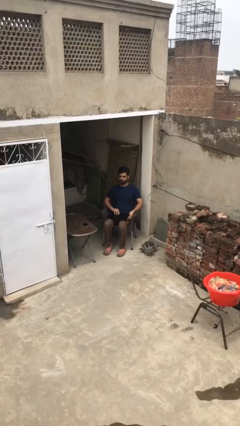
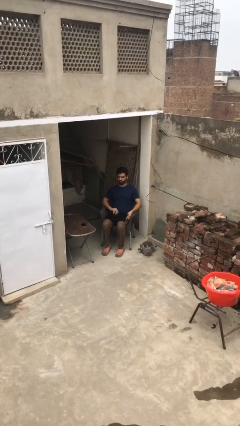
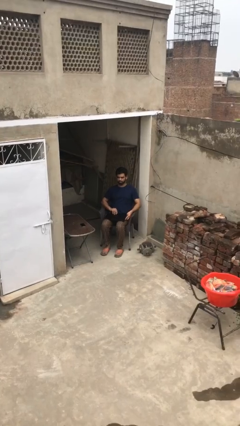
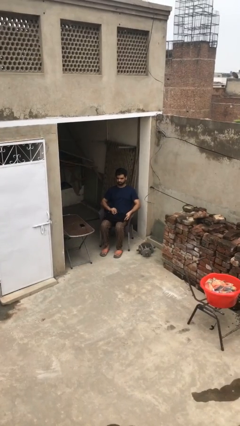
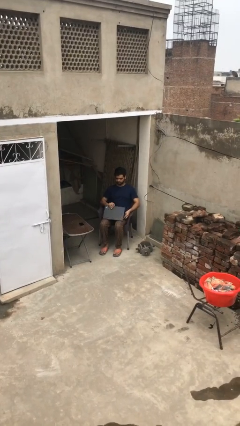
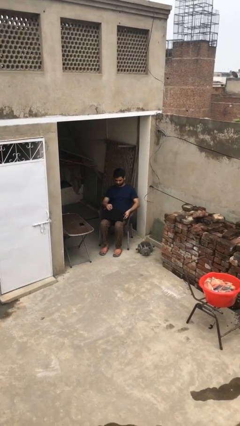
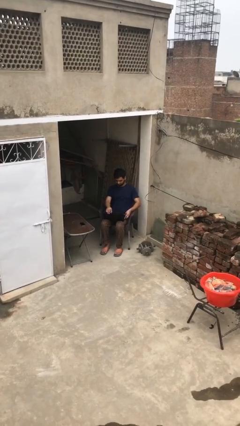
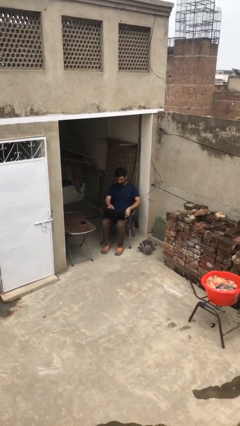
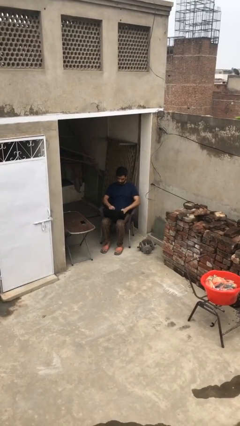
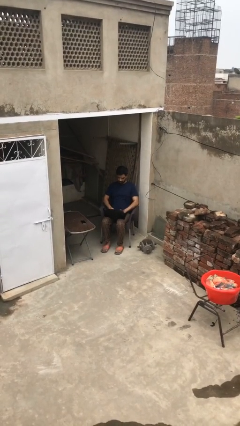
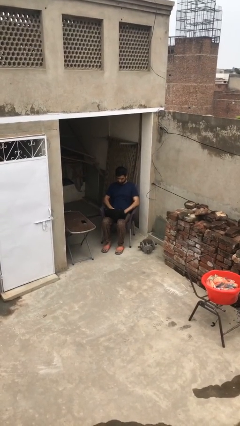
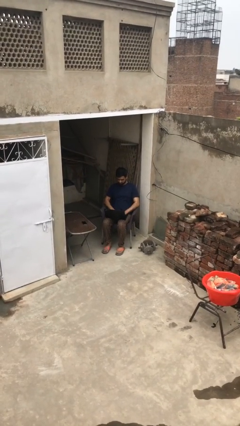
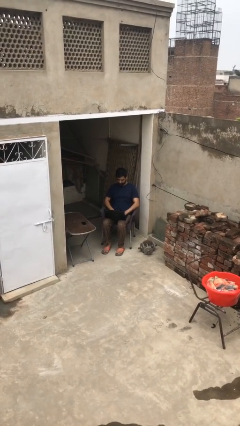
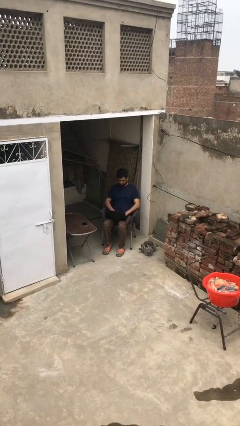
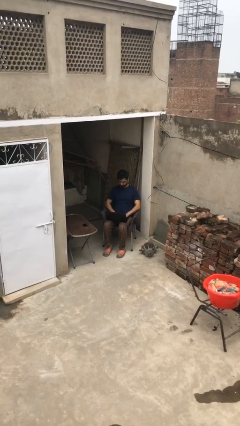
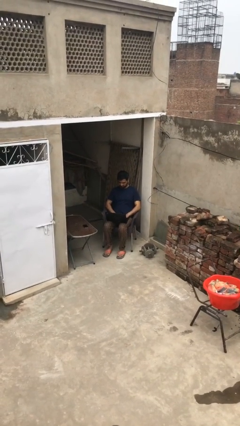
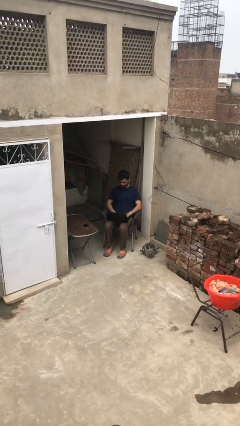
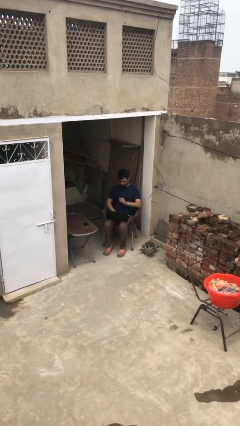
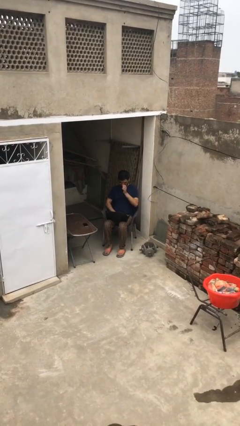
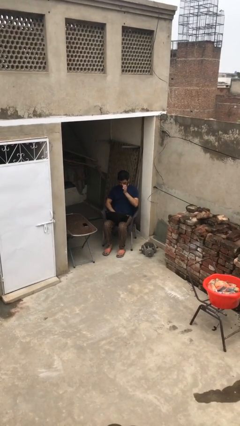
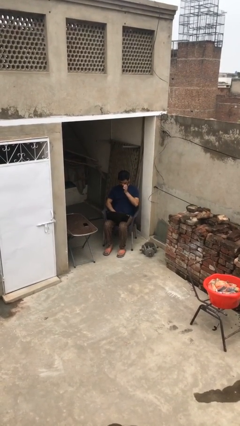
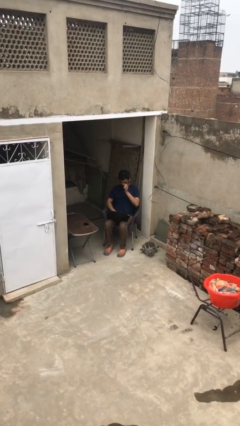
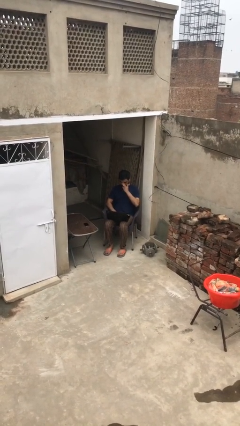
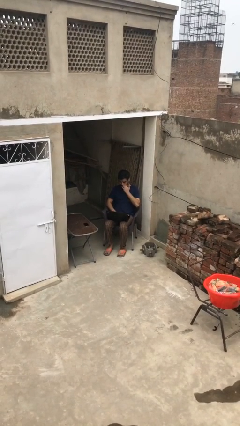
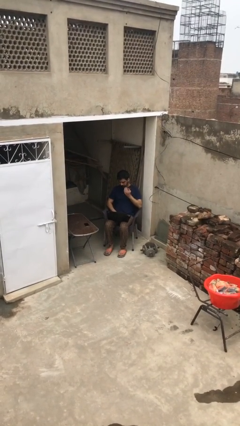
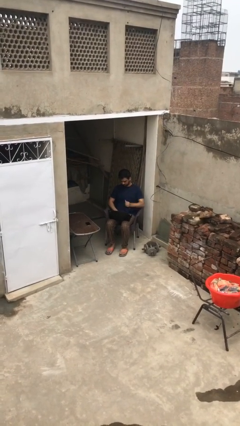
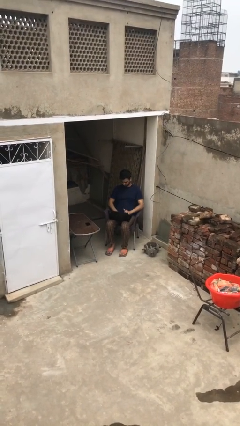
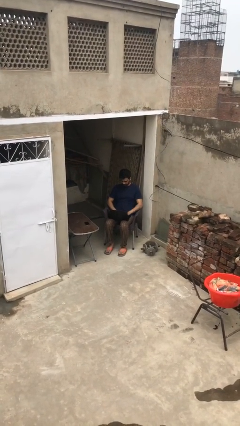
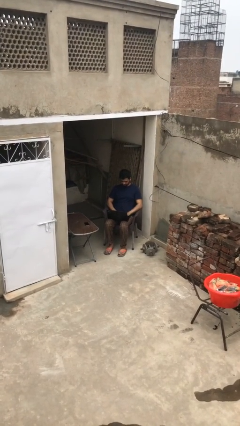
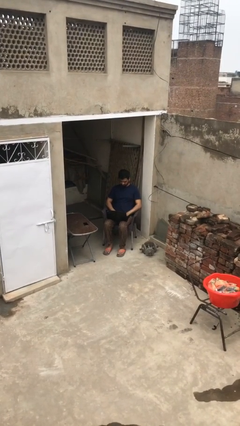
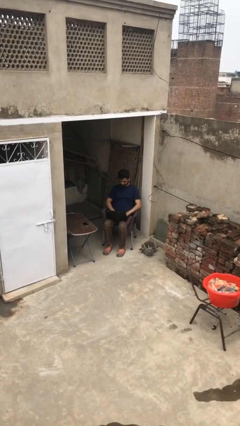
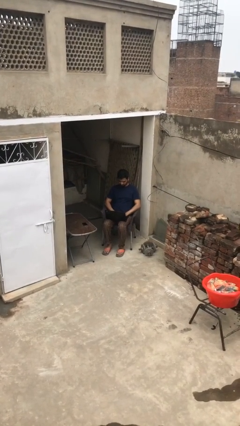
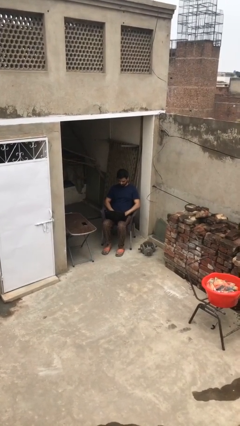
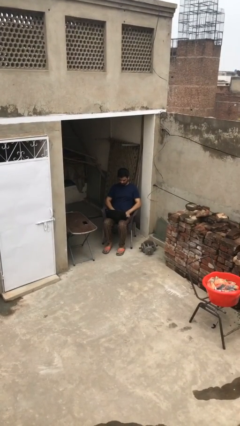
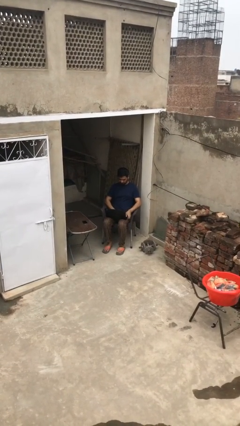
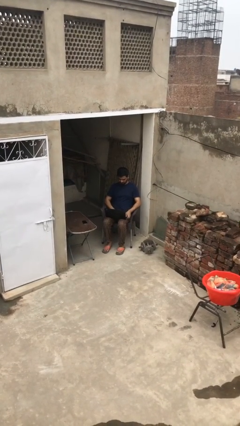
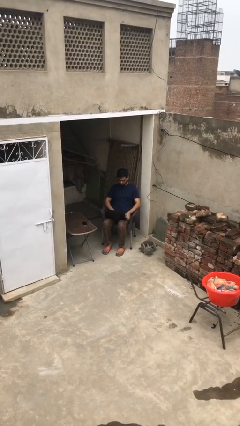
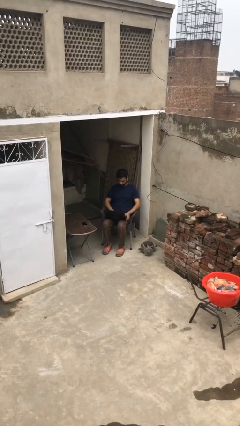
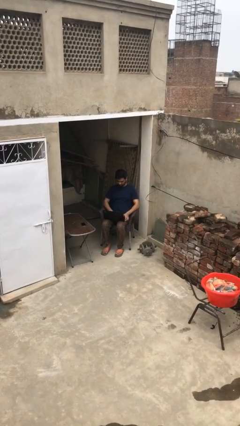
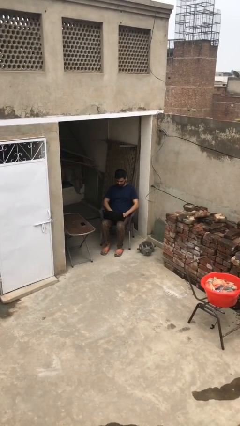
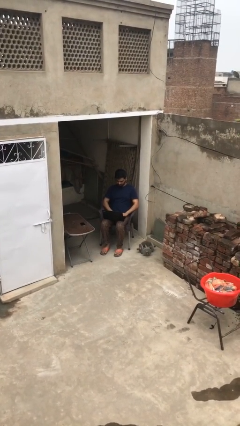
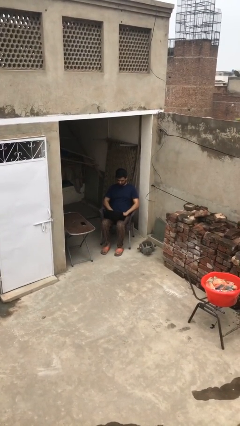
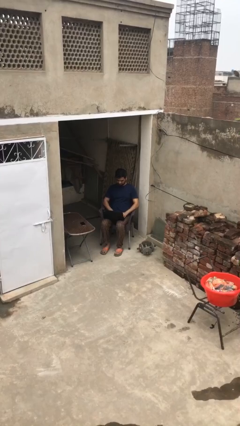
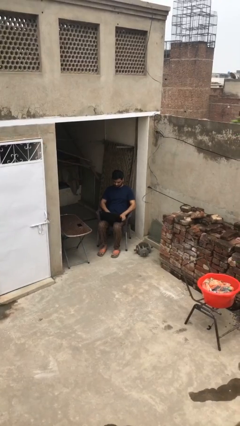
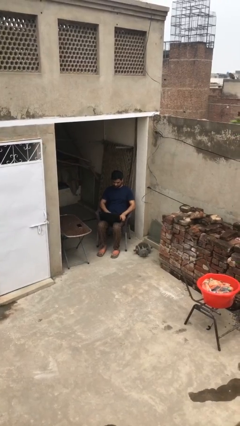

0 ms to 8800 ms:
person interacts with laptop

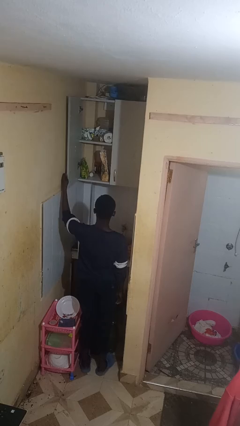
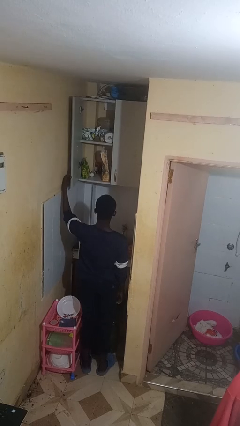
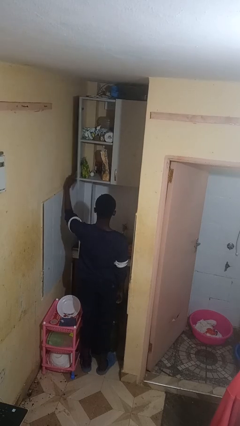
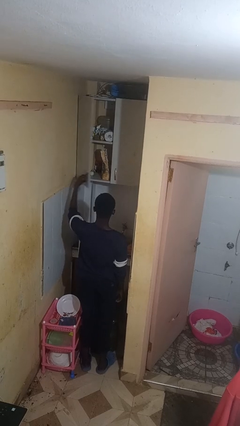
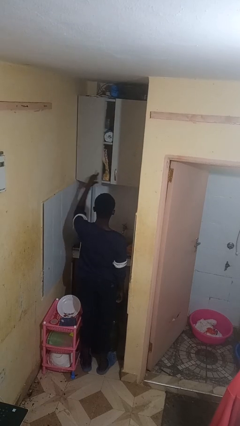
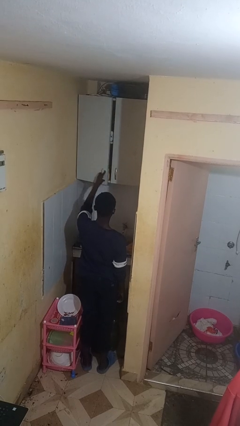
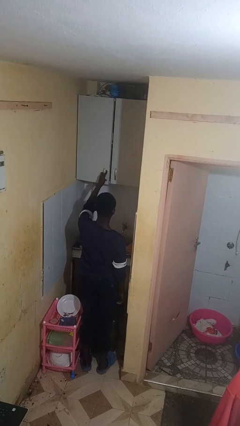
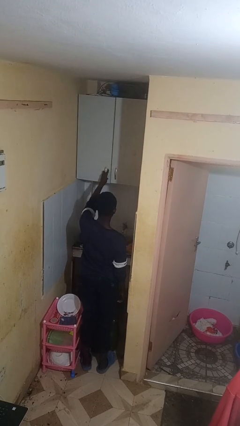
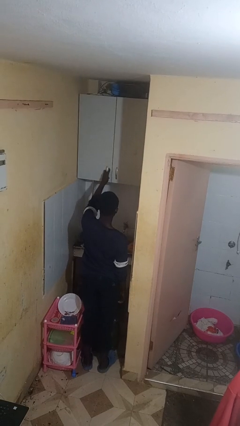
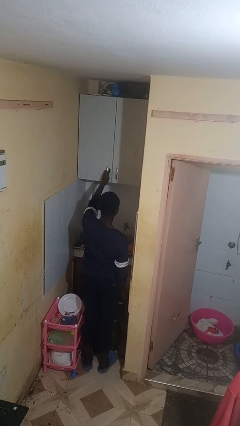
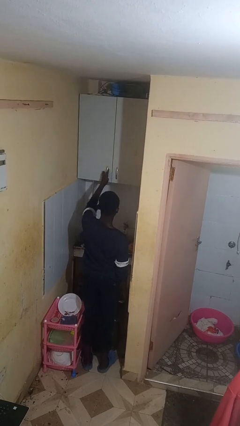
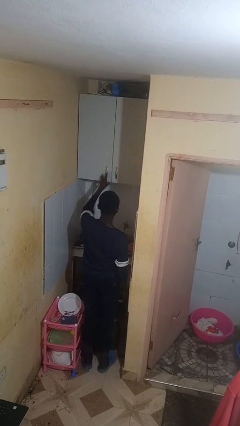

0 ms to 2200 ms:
person closes cabinet

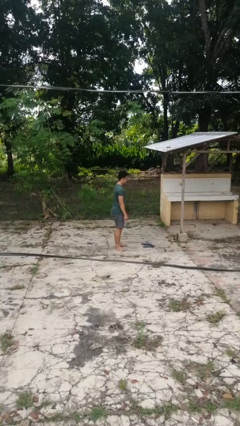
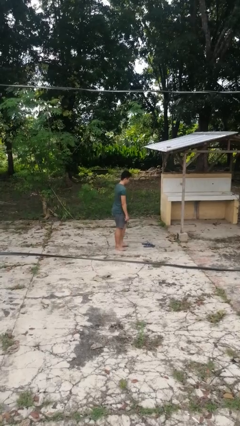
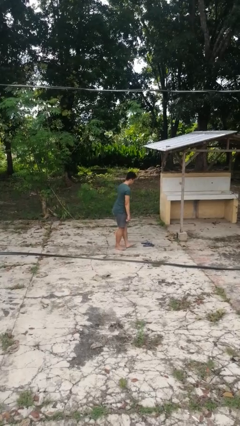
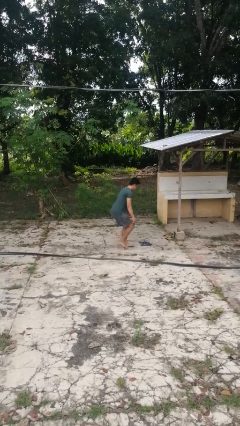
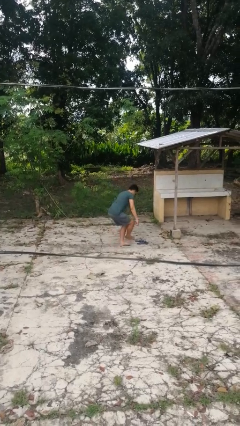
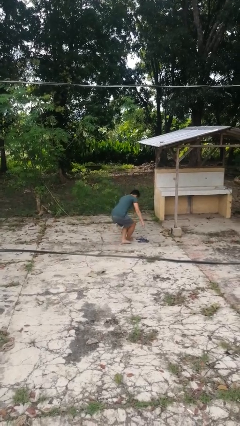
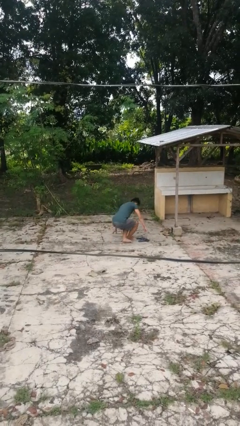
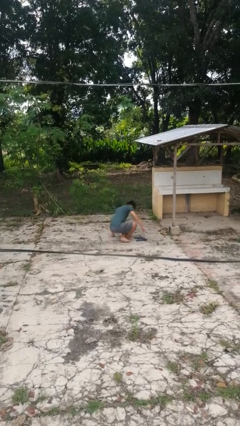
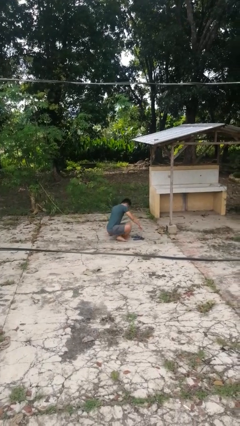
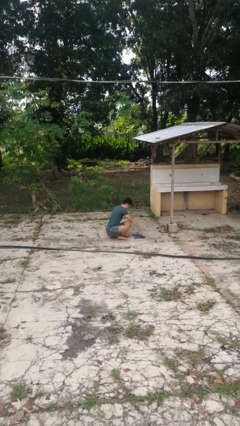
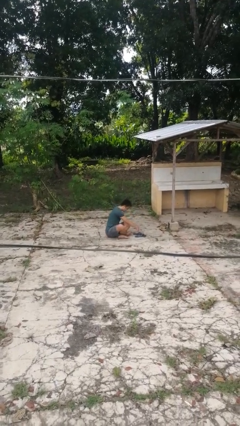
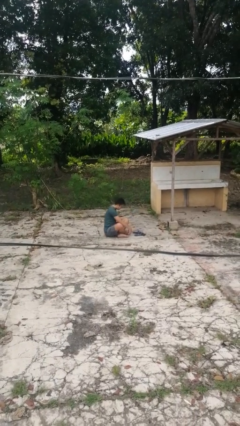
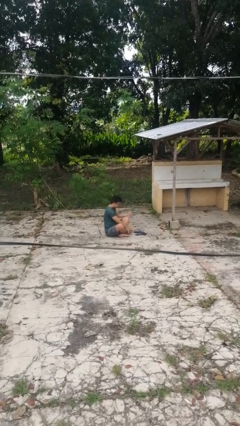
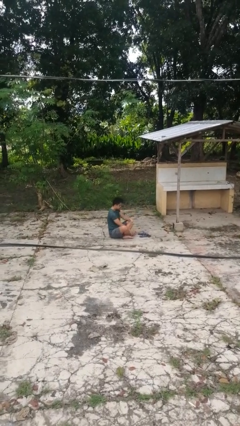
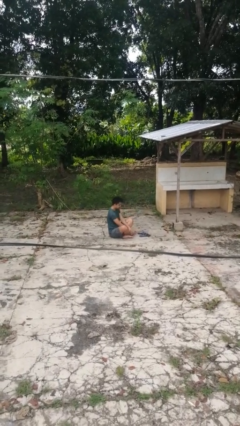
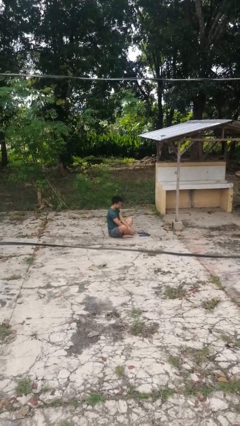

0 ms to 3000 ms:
person sits crisscross

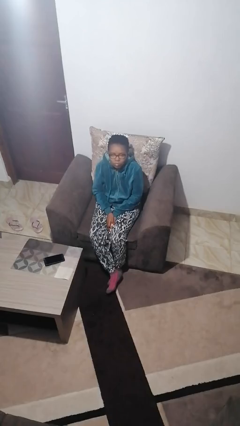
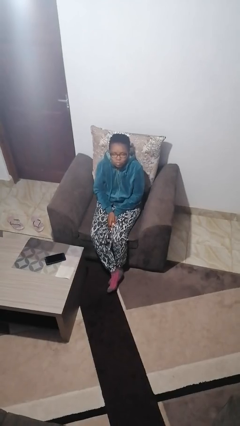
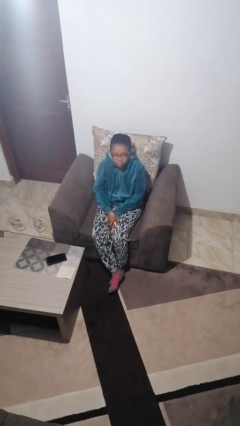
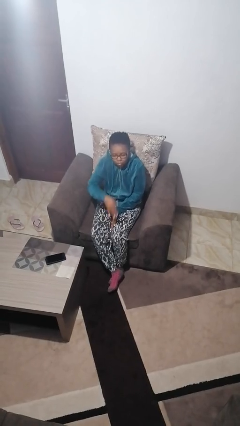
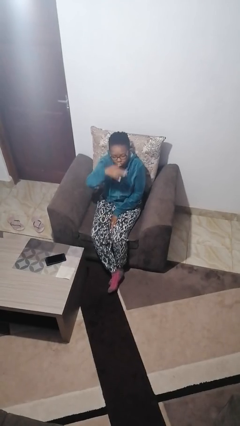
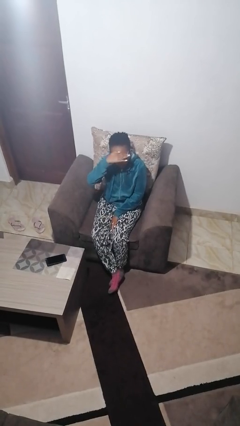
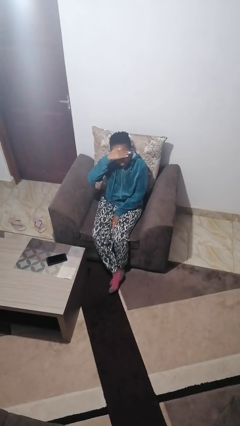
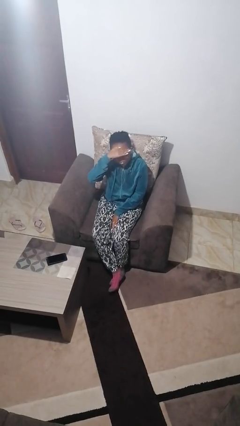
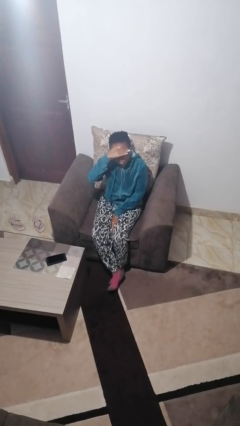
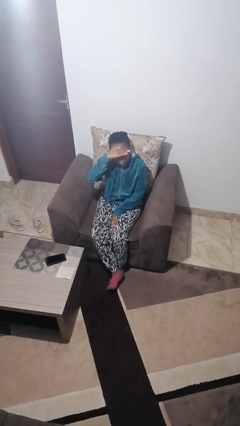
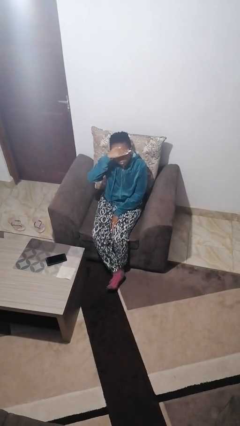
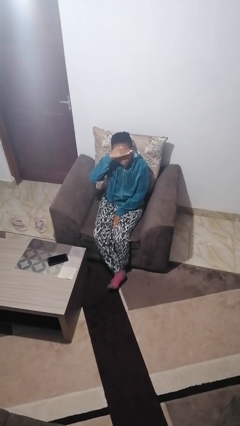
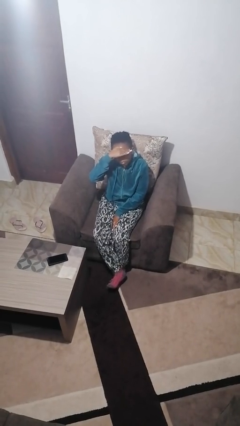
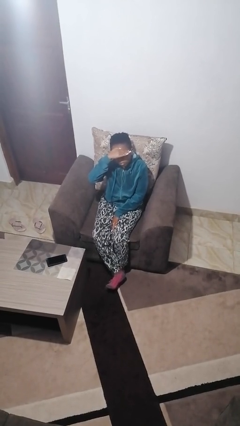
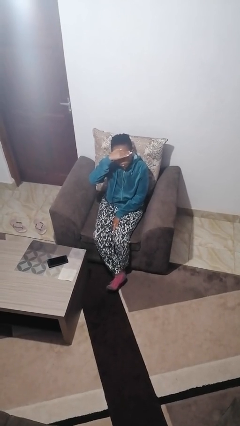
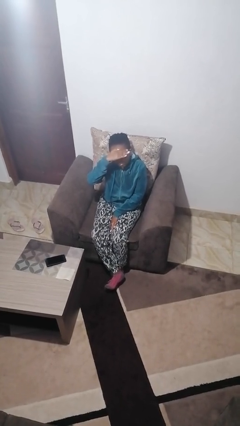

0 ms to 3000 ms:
person shades eyes

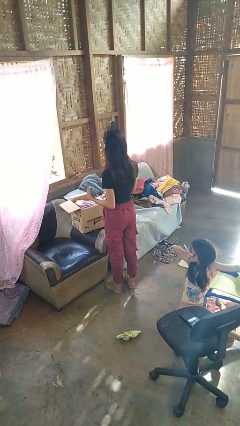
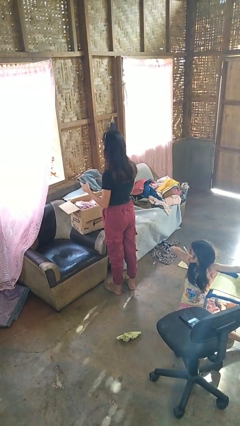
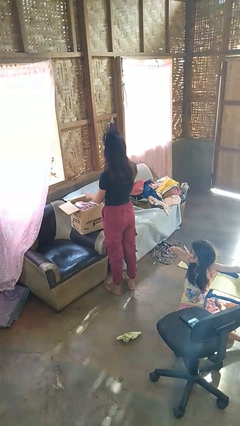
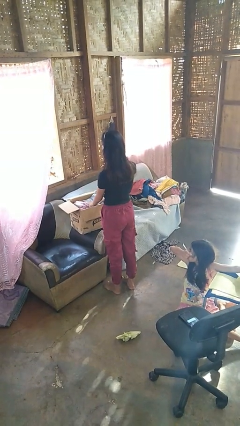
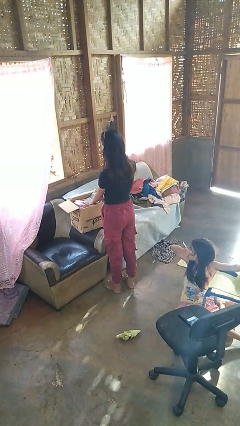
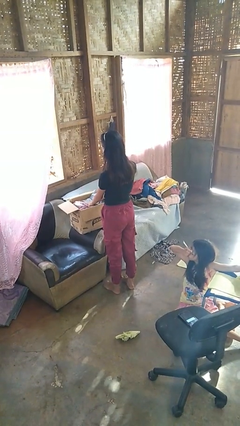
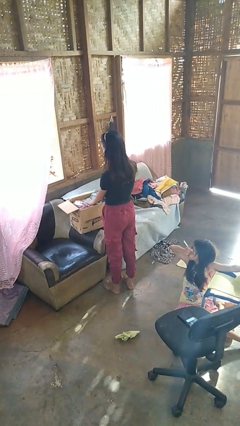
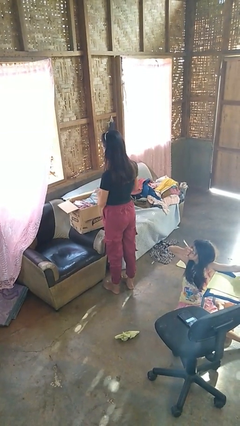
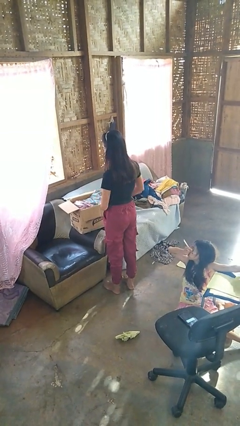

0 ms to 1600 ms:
person puts object into box
